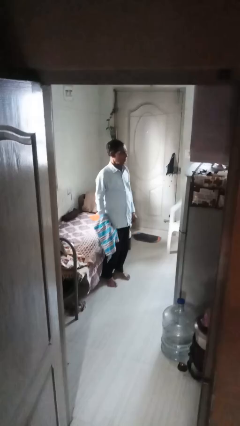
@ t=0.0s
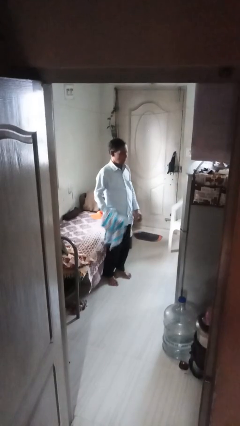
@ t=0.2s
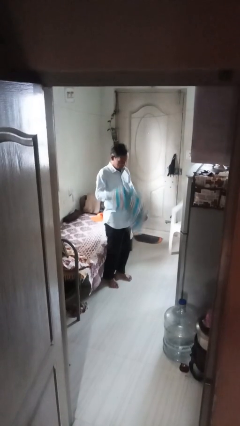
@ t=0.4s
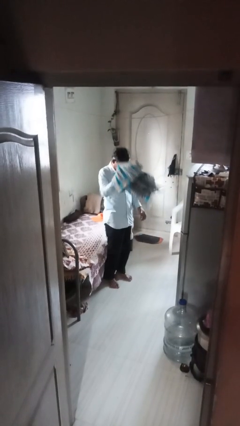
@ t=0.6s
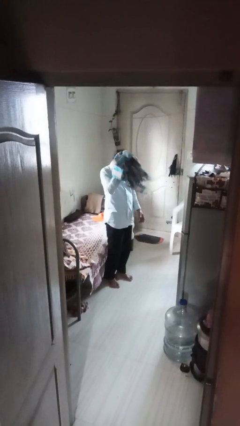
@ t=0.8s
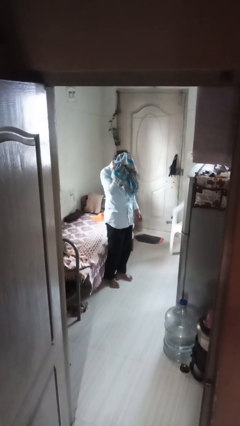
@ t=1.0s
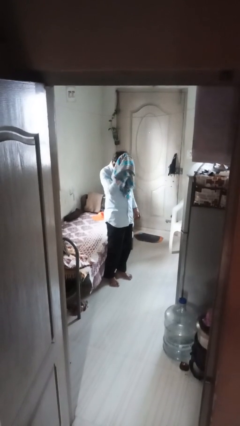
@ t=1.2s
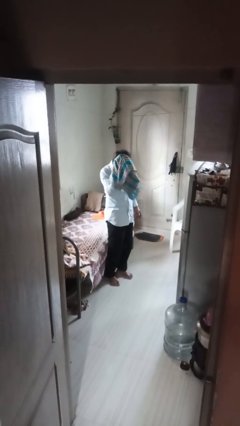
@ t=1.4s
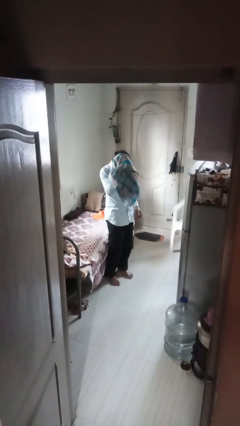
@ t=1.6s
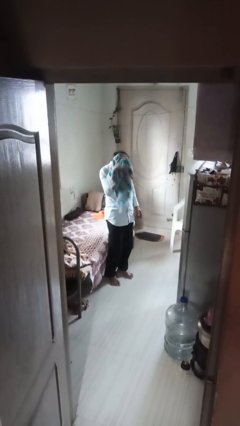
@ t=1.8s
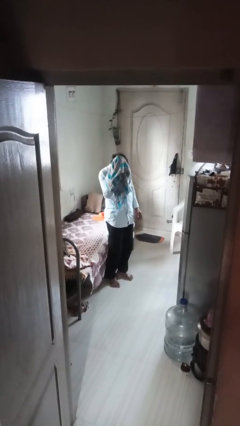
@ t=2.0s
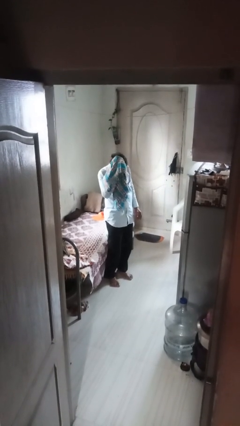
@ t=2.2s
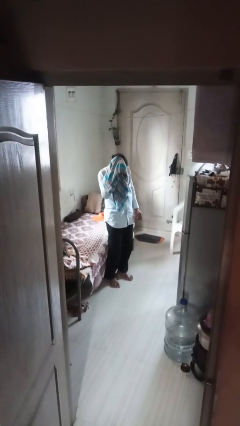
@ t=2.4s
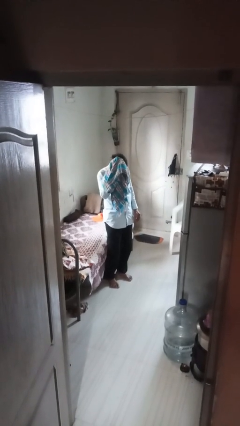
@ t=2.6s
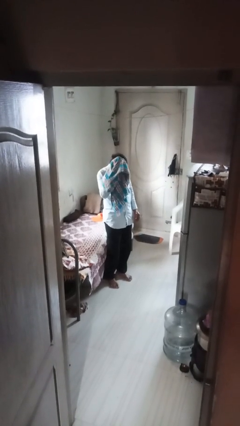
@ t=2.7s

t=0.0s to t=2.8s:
person dries hair with towel

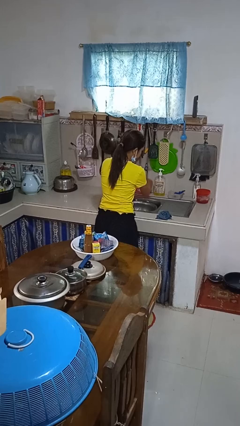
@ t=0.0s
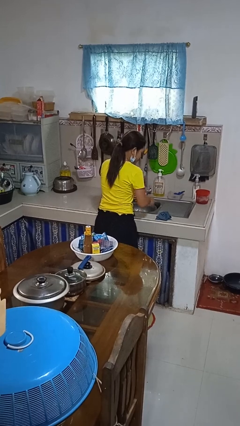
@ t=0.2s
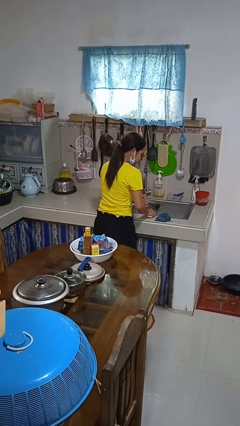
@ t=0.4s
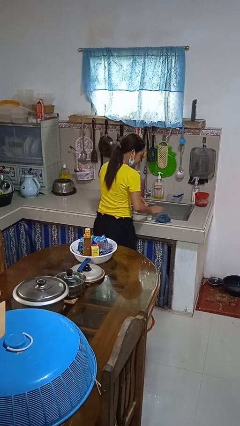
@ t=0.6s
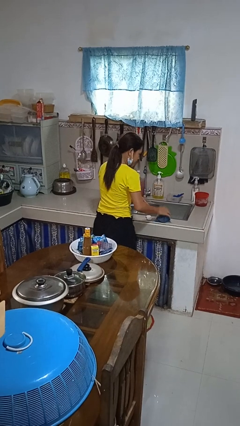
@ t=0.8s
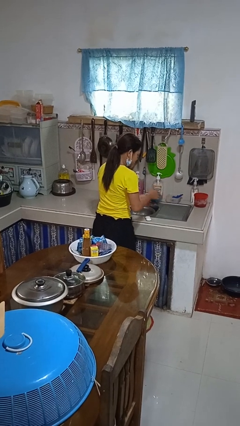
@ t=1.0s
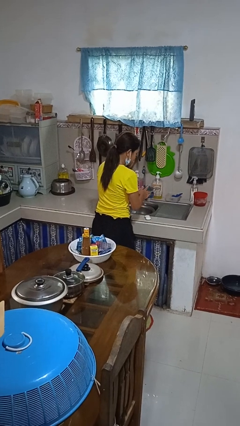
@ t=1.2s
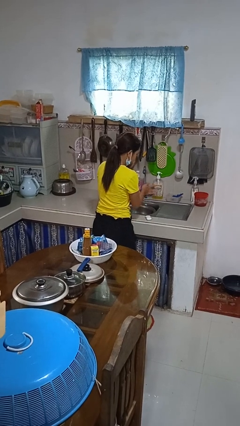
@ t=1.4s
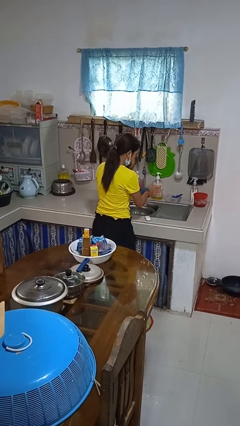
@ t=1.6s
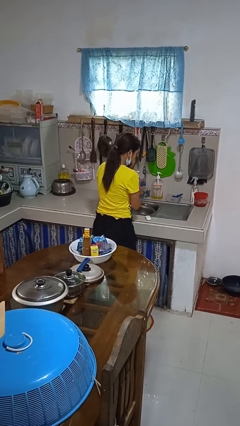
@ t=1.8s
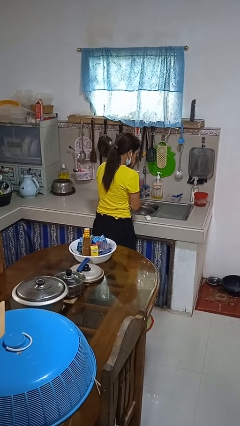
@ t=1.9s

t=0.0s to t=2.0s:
person dries hands with towel

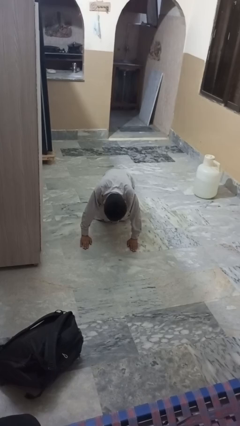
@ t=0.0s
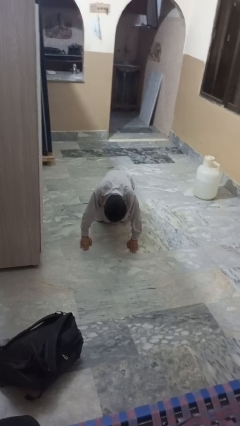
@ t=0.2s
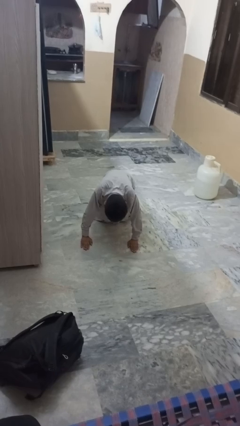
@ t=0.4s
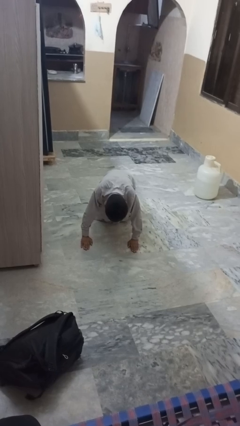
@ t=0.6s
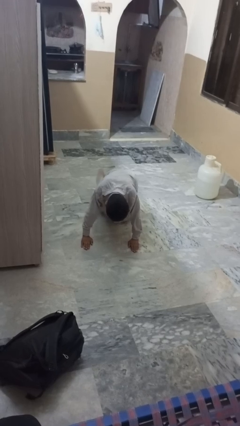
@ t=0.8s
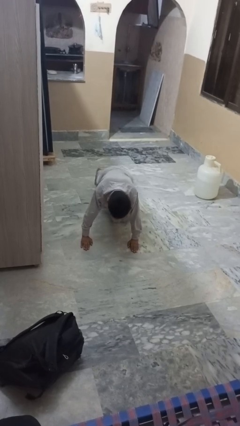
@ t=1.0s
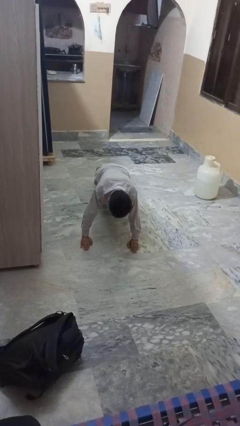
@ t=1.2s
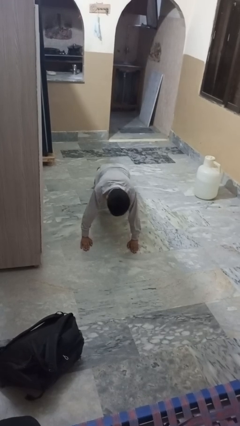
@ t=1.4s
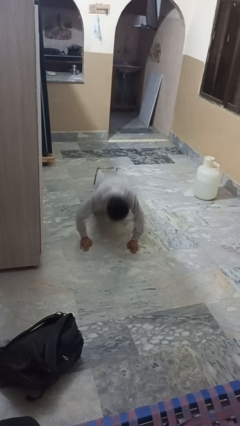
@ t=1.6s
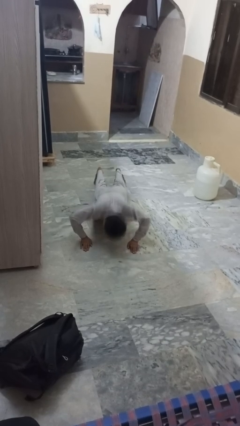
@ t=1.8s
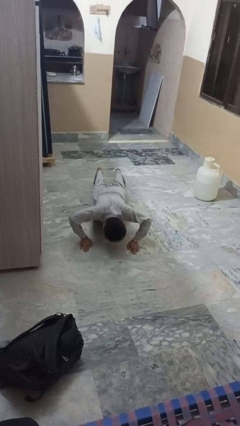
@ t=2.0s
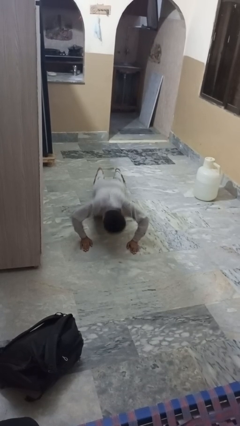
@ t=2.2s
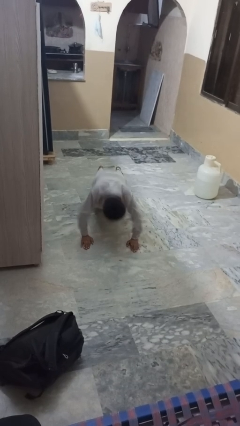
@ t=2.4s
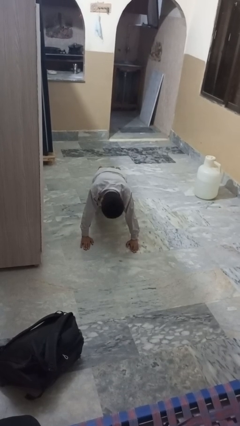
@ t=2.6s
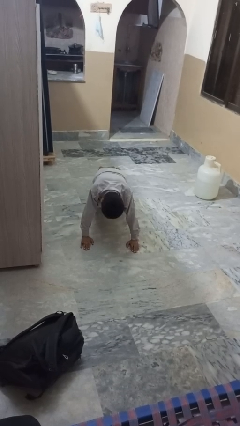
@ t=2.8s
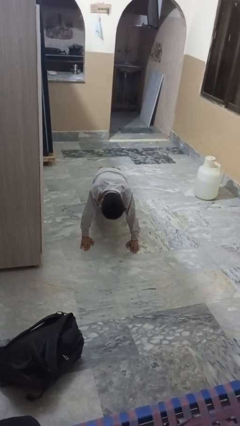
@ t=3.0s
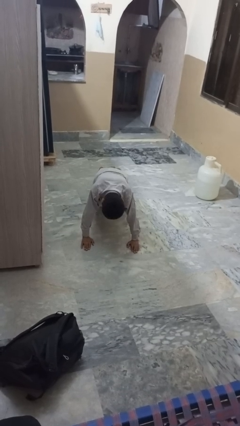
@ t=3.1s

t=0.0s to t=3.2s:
person exercises with pushup

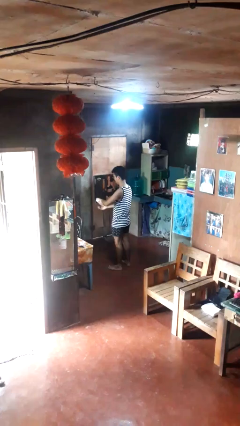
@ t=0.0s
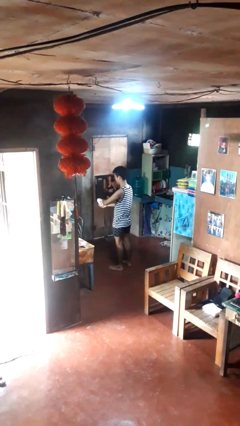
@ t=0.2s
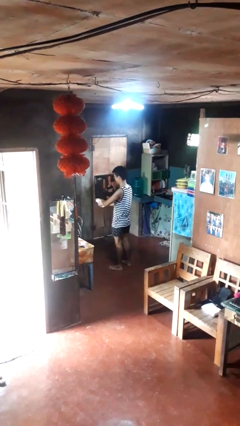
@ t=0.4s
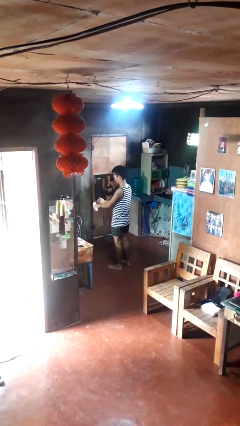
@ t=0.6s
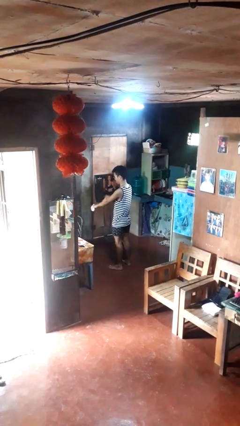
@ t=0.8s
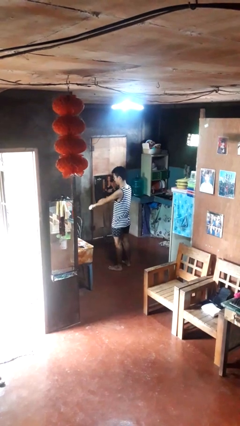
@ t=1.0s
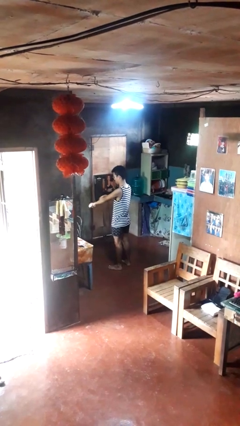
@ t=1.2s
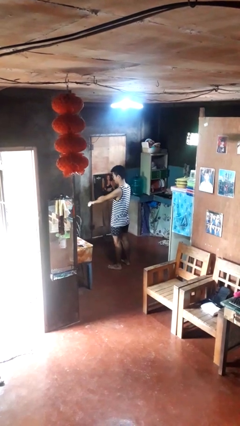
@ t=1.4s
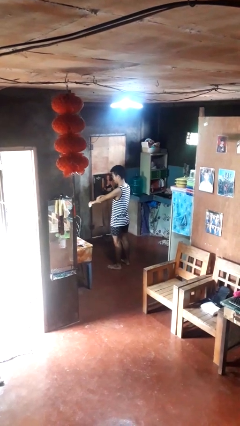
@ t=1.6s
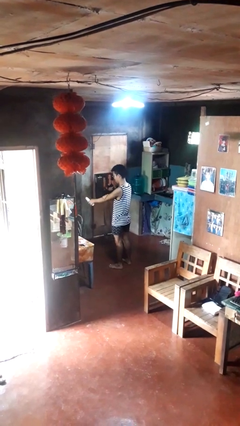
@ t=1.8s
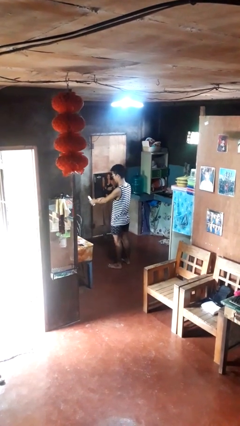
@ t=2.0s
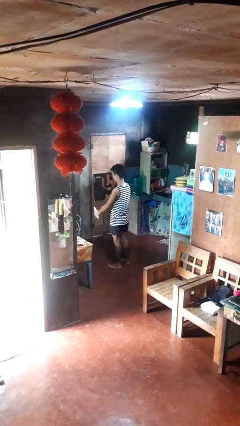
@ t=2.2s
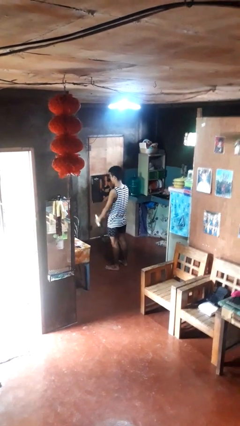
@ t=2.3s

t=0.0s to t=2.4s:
person applies sunscreen

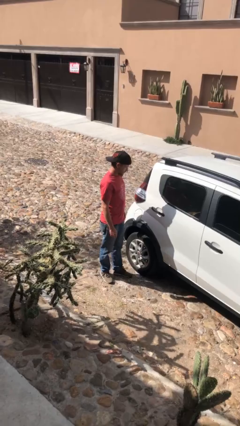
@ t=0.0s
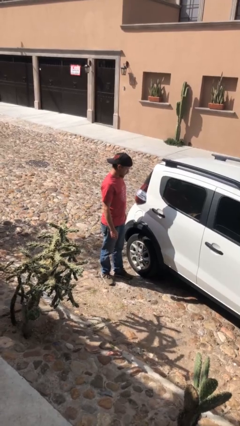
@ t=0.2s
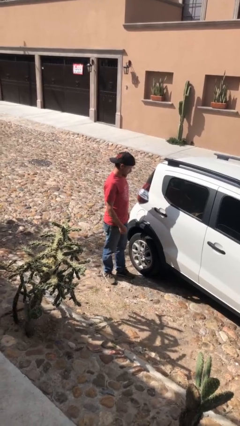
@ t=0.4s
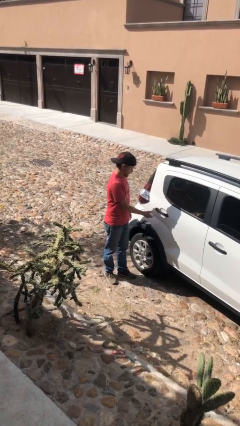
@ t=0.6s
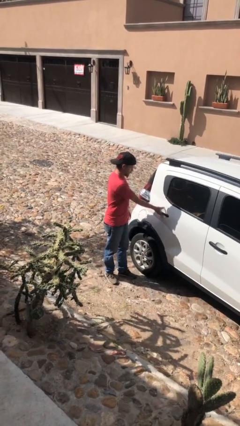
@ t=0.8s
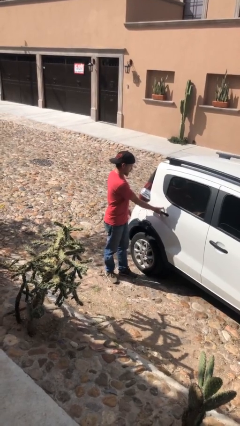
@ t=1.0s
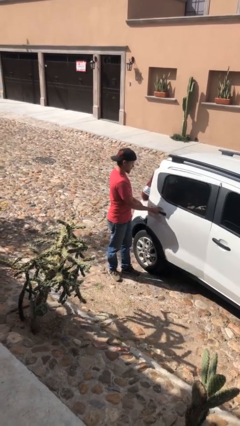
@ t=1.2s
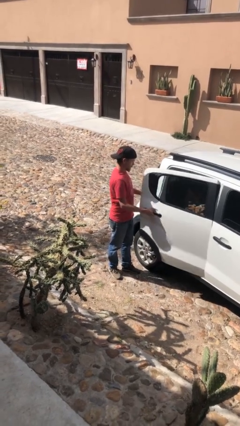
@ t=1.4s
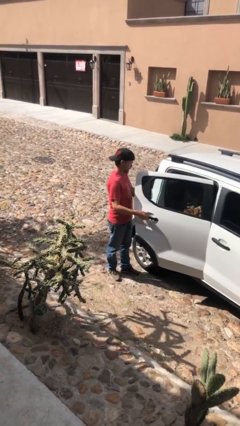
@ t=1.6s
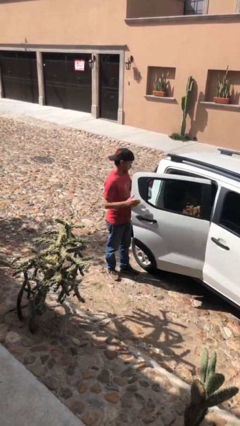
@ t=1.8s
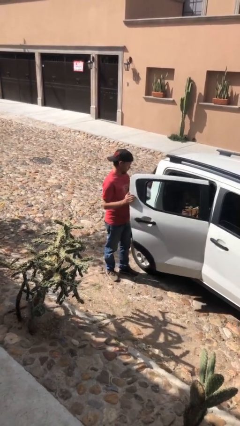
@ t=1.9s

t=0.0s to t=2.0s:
person opens car door

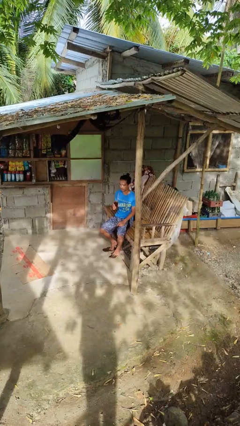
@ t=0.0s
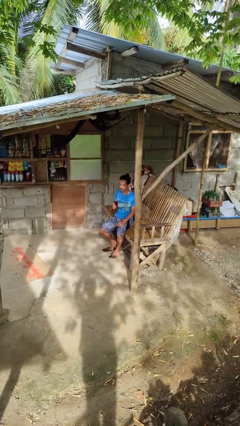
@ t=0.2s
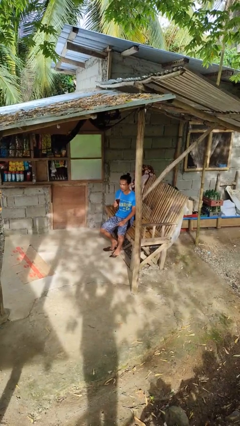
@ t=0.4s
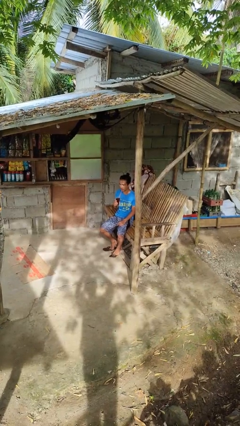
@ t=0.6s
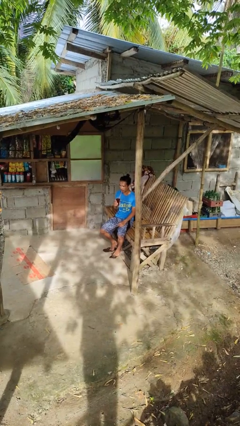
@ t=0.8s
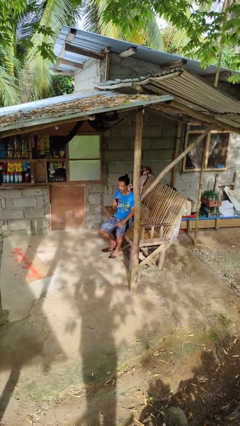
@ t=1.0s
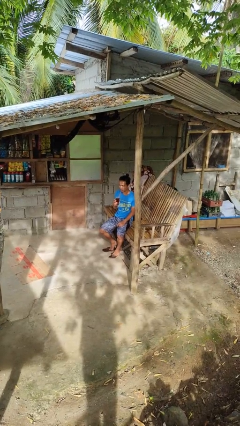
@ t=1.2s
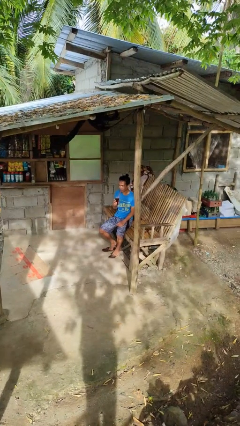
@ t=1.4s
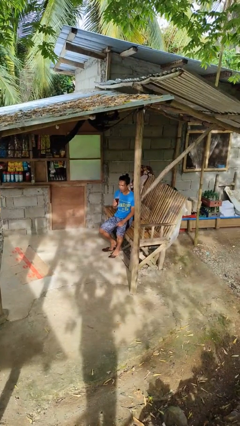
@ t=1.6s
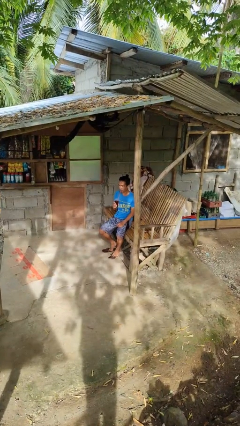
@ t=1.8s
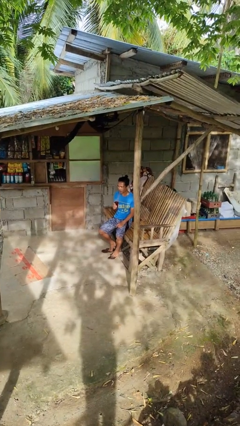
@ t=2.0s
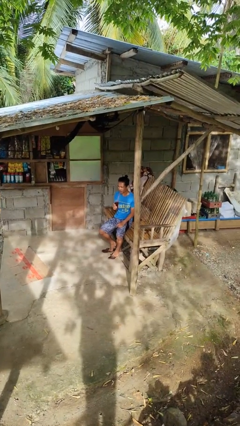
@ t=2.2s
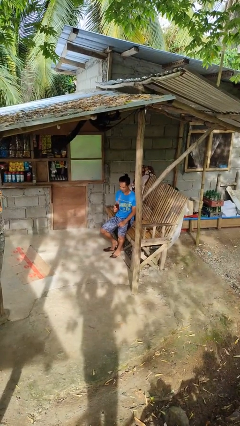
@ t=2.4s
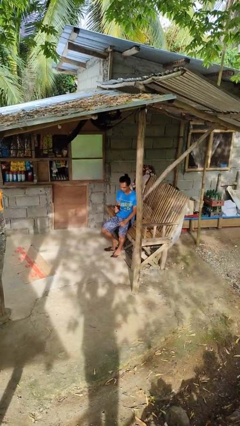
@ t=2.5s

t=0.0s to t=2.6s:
person drinks from straw

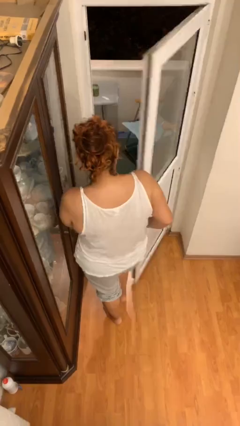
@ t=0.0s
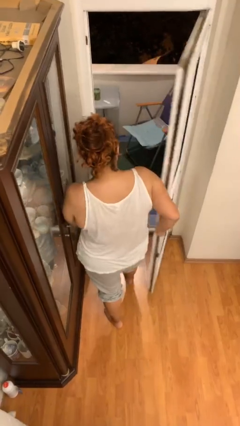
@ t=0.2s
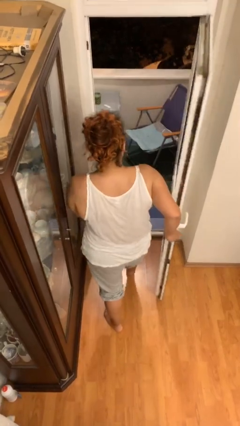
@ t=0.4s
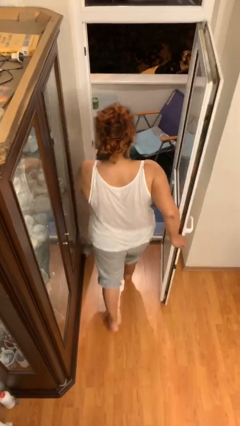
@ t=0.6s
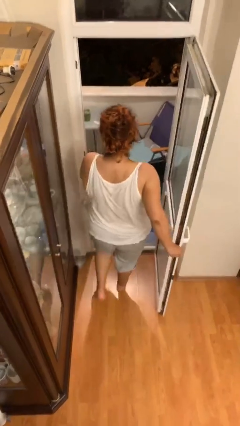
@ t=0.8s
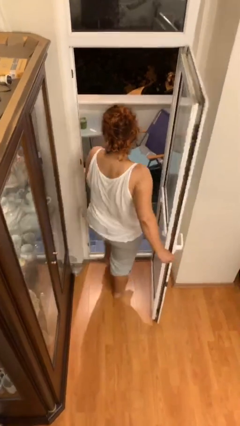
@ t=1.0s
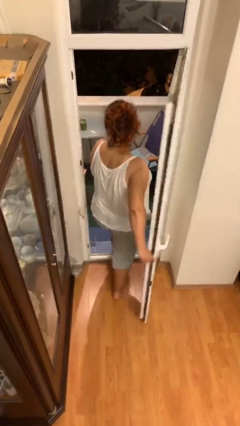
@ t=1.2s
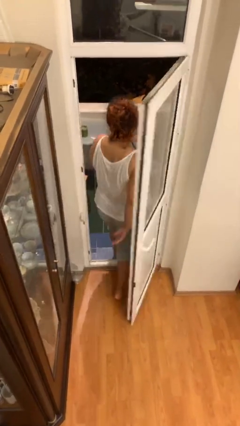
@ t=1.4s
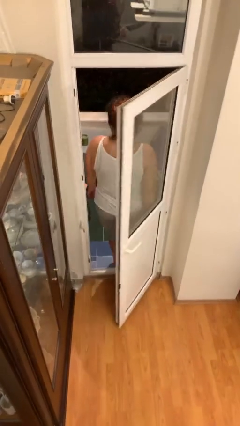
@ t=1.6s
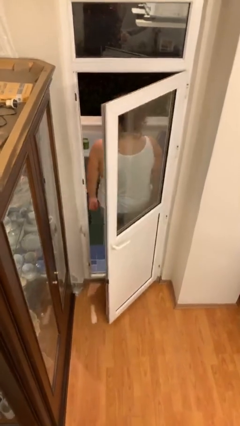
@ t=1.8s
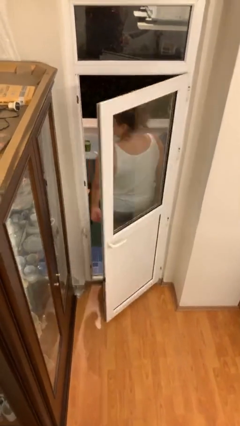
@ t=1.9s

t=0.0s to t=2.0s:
person exits scene through structure
